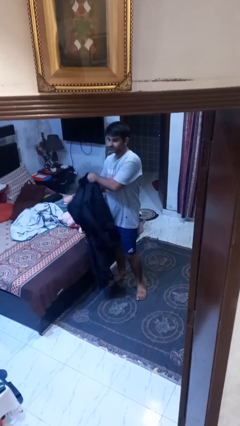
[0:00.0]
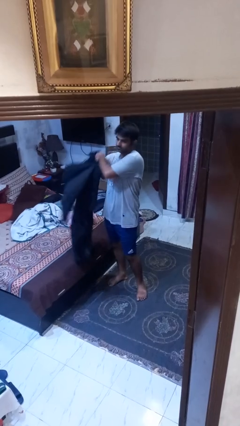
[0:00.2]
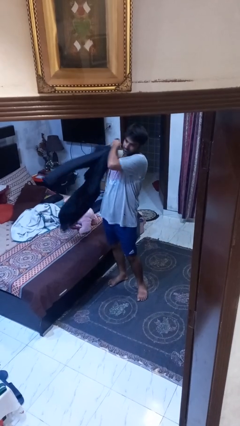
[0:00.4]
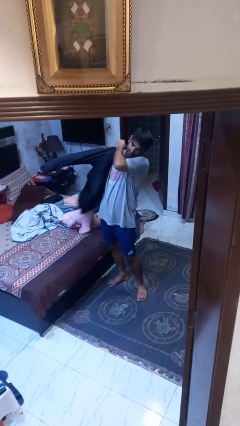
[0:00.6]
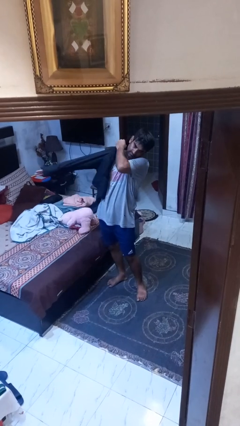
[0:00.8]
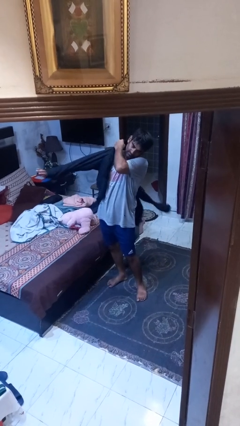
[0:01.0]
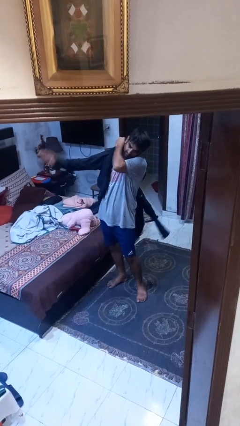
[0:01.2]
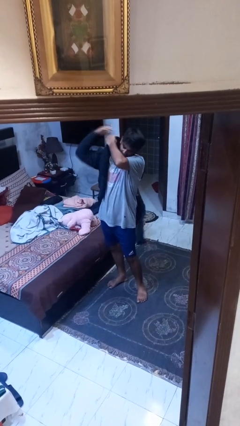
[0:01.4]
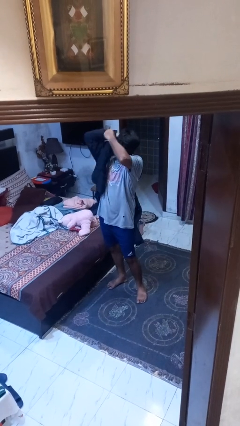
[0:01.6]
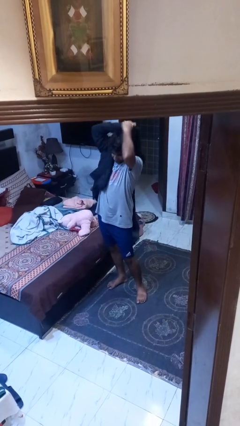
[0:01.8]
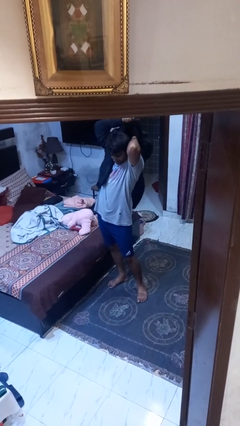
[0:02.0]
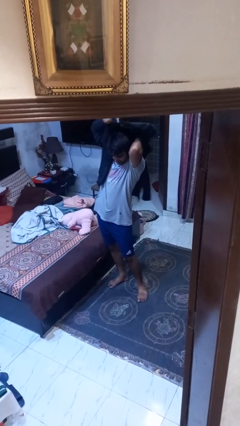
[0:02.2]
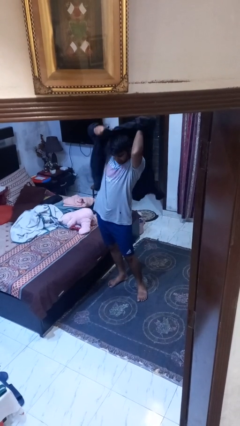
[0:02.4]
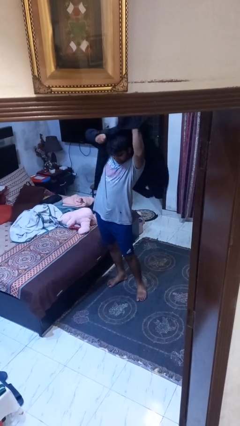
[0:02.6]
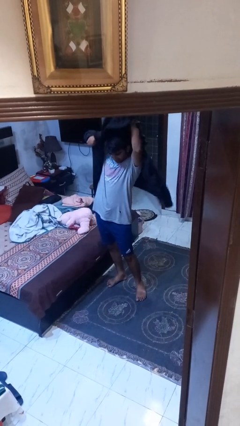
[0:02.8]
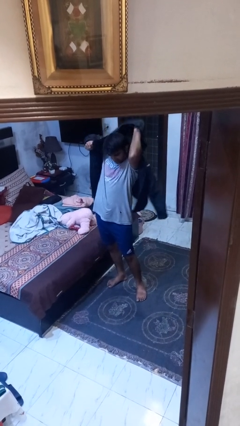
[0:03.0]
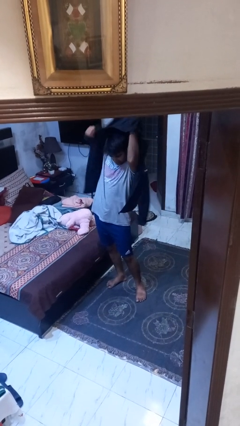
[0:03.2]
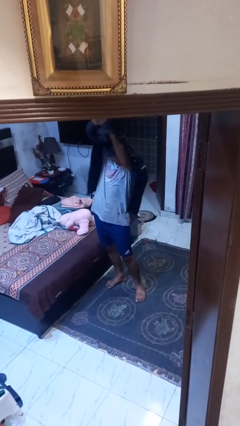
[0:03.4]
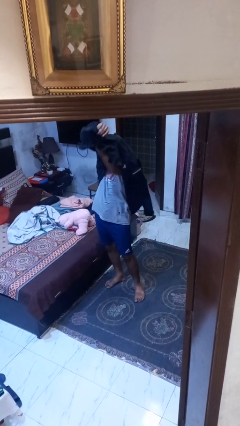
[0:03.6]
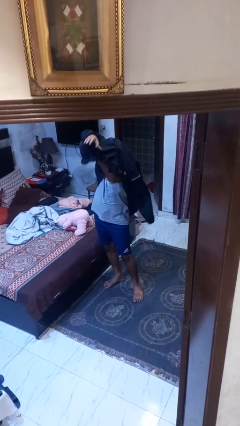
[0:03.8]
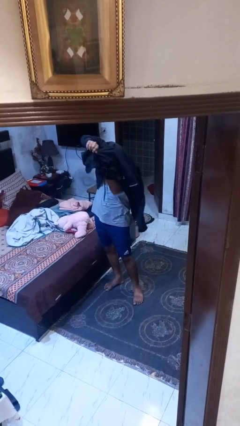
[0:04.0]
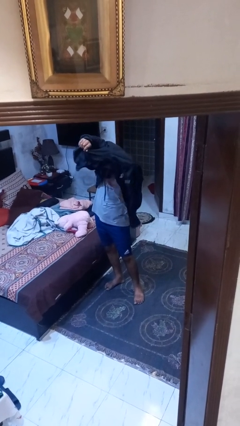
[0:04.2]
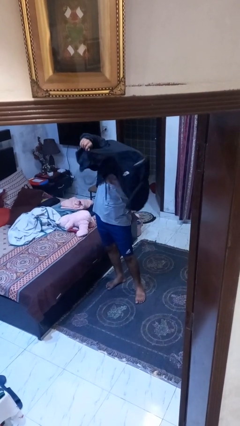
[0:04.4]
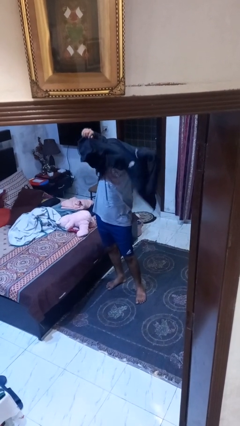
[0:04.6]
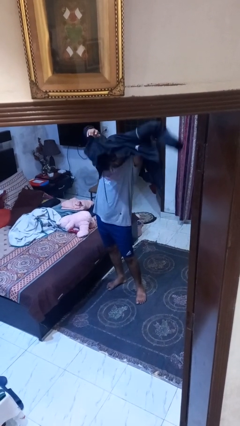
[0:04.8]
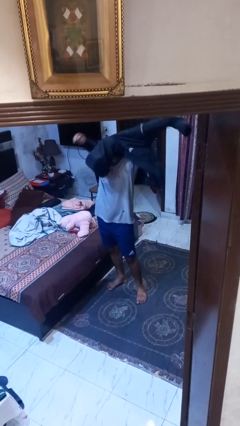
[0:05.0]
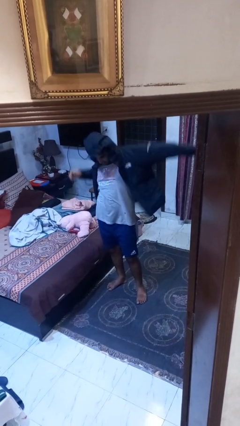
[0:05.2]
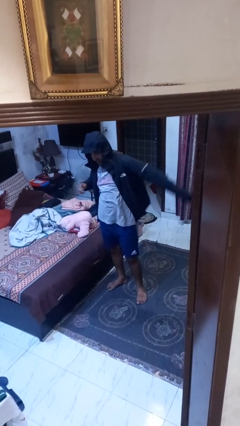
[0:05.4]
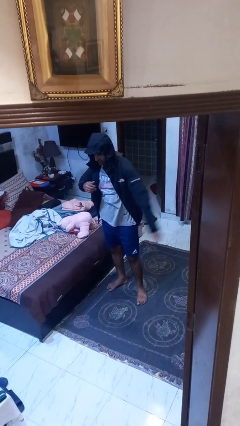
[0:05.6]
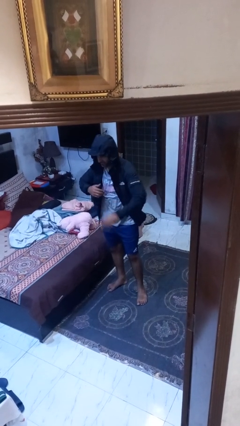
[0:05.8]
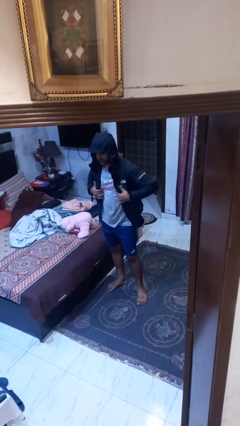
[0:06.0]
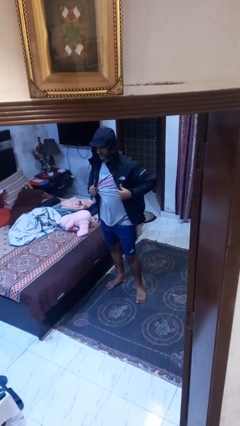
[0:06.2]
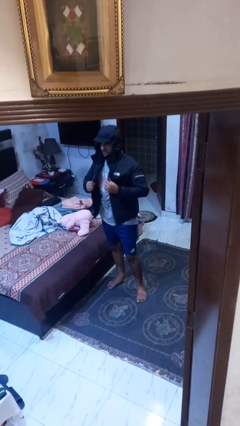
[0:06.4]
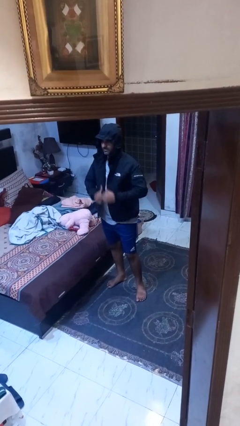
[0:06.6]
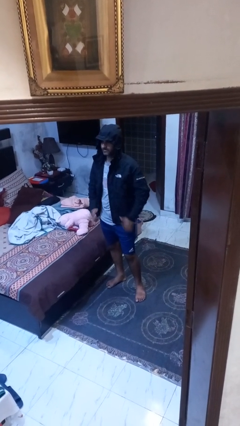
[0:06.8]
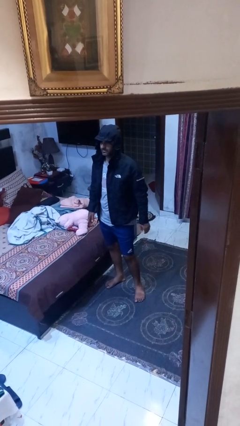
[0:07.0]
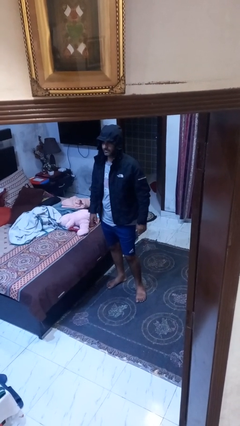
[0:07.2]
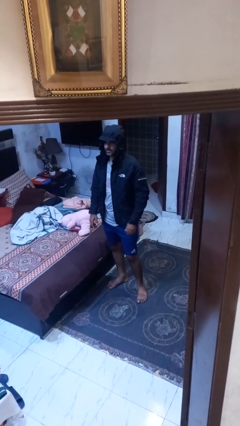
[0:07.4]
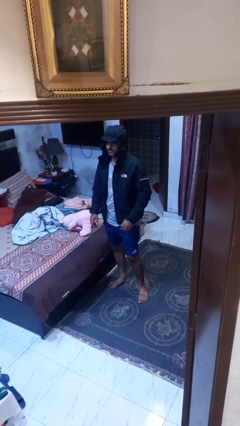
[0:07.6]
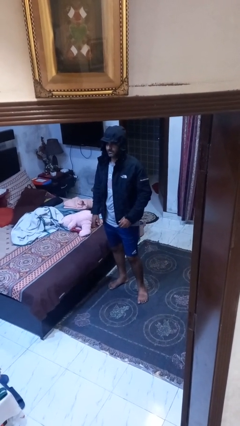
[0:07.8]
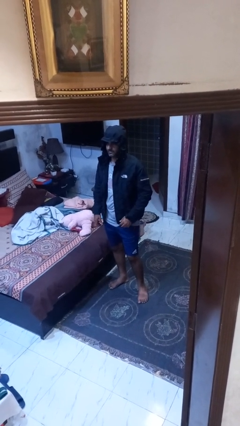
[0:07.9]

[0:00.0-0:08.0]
person puts on hoodie

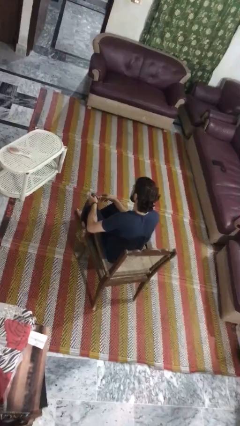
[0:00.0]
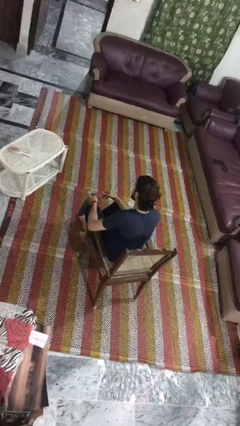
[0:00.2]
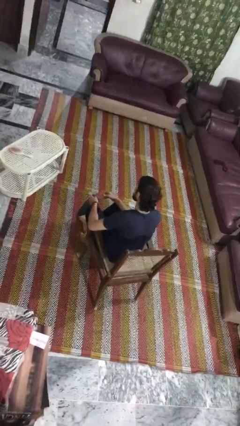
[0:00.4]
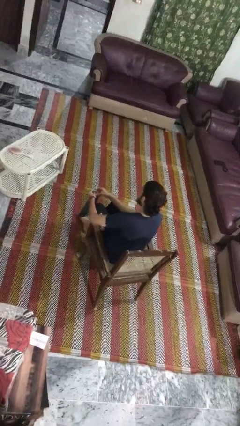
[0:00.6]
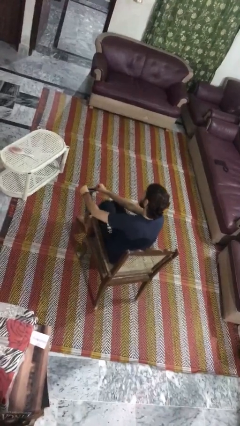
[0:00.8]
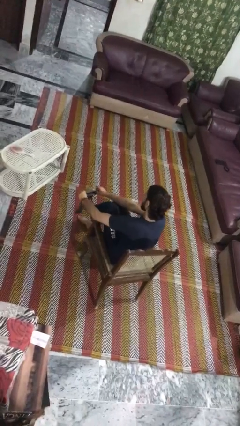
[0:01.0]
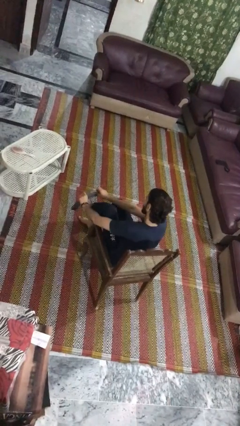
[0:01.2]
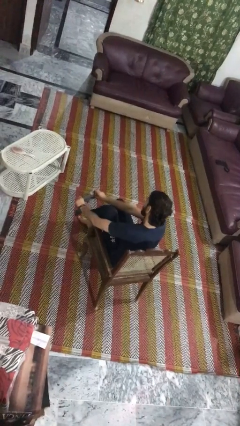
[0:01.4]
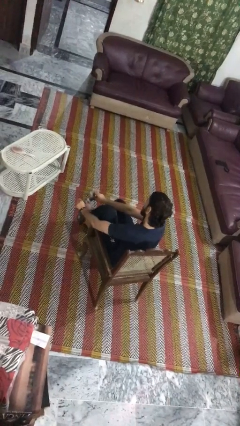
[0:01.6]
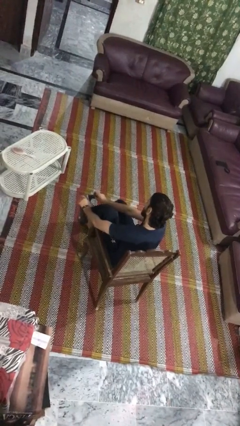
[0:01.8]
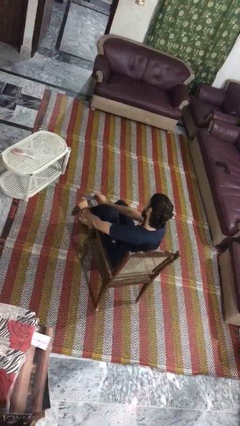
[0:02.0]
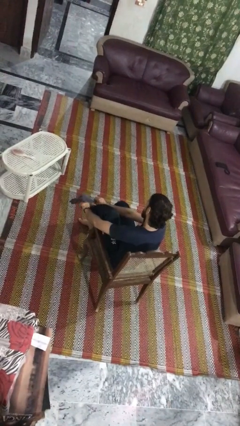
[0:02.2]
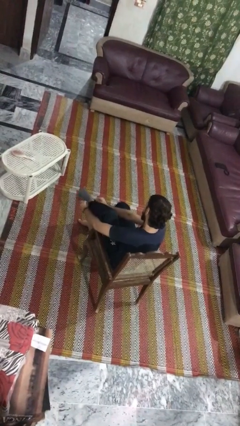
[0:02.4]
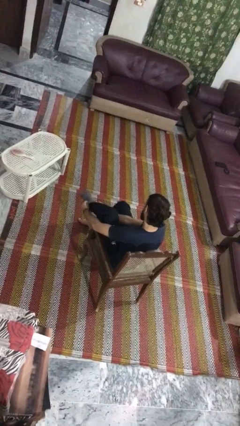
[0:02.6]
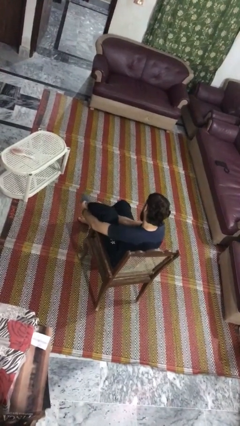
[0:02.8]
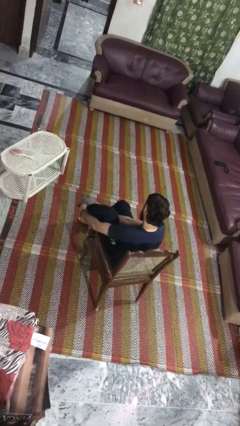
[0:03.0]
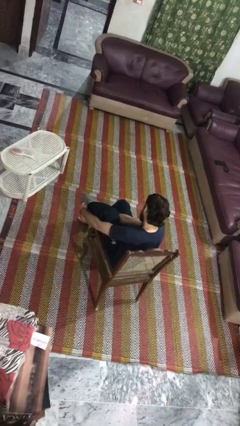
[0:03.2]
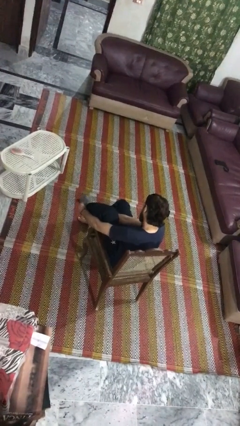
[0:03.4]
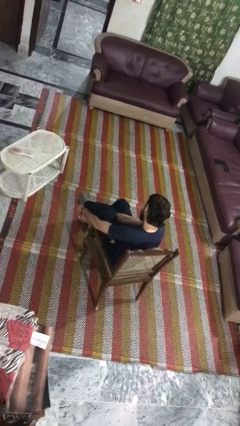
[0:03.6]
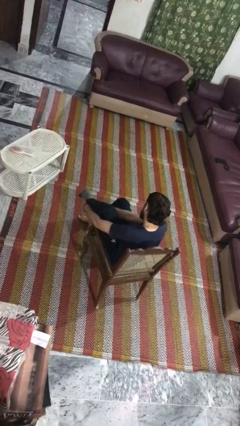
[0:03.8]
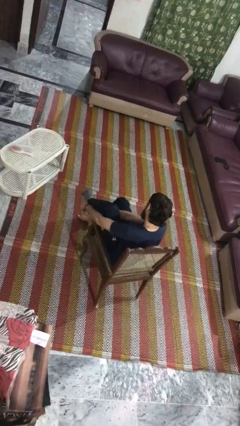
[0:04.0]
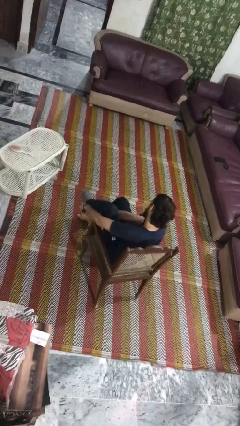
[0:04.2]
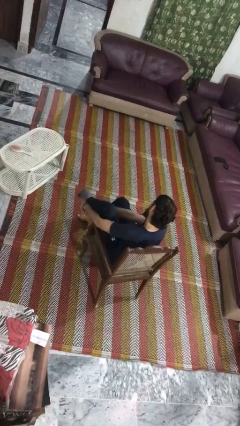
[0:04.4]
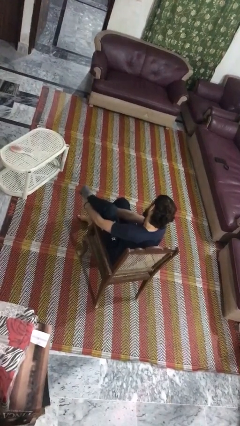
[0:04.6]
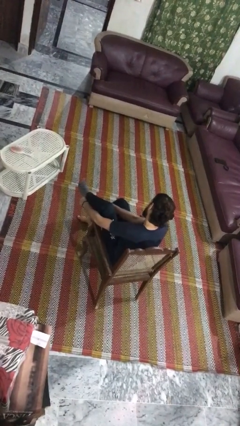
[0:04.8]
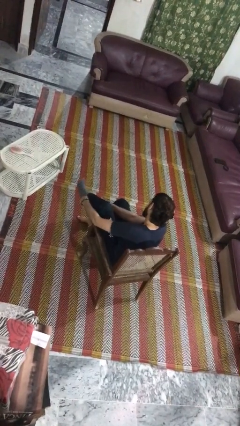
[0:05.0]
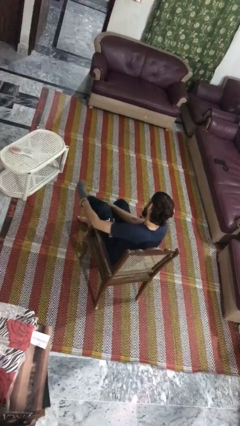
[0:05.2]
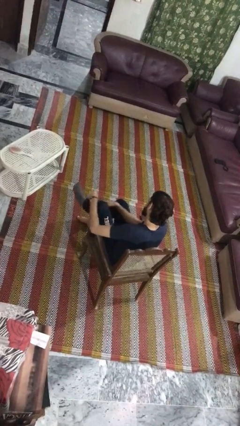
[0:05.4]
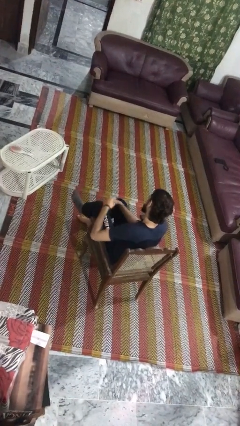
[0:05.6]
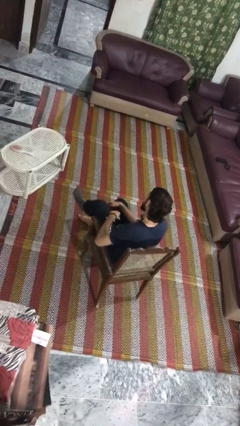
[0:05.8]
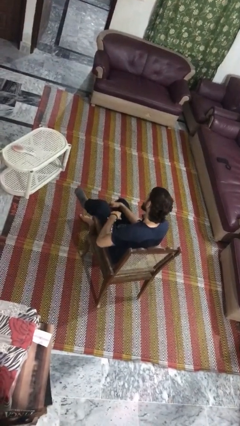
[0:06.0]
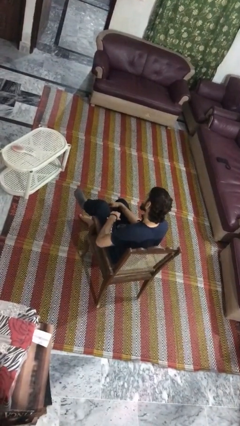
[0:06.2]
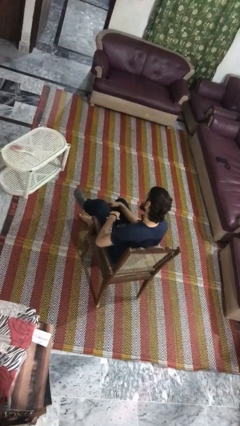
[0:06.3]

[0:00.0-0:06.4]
person puts on socks

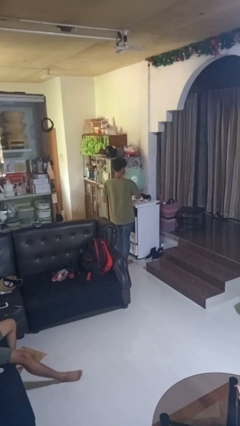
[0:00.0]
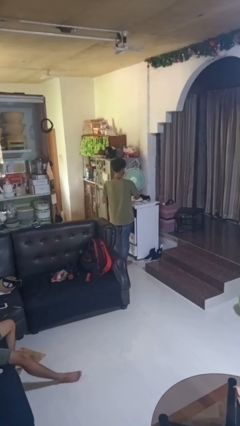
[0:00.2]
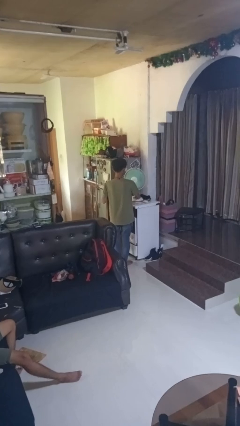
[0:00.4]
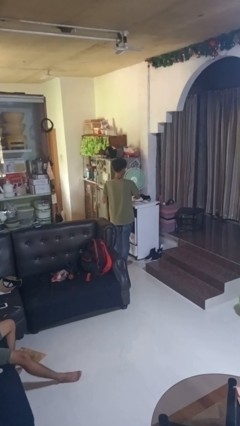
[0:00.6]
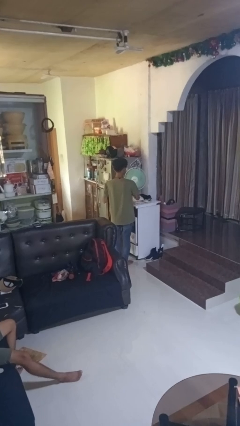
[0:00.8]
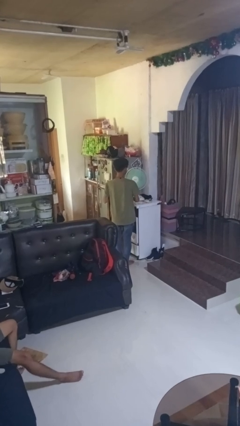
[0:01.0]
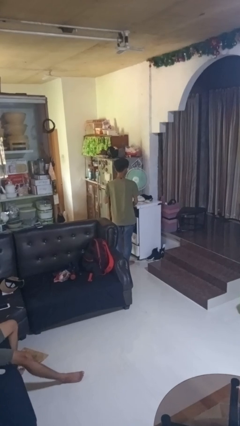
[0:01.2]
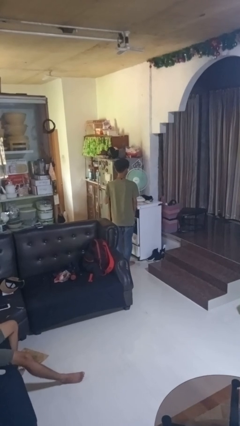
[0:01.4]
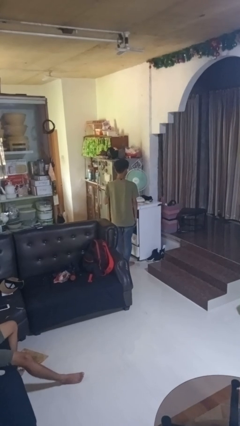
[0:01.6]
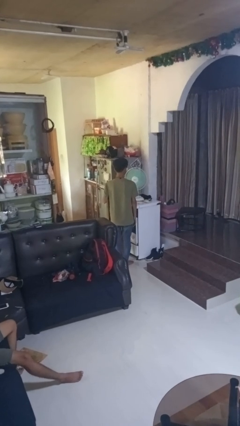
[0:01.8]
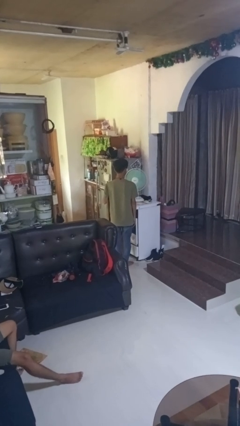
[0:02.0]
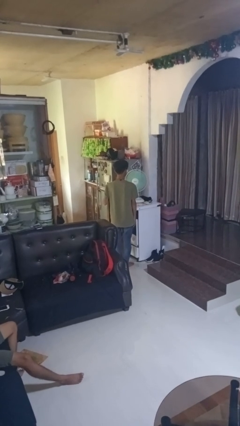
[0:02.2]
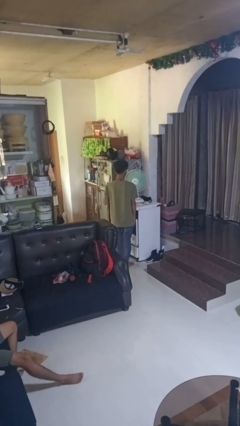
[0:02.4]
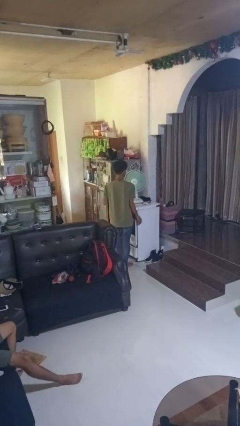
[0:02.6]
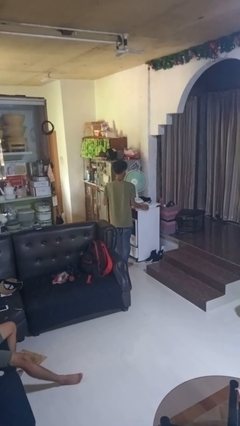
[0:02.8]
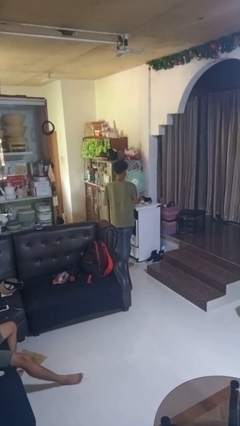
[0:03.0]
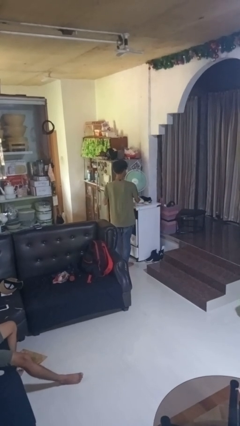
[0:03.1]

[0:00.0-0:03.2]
person turns on fan

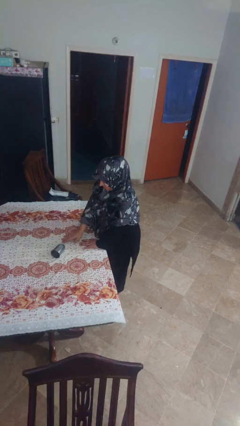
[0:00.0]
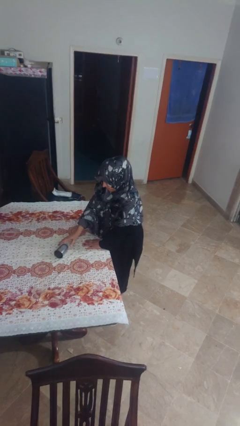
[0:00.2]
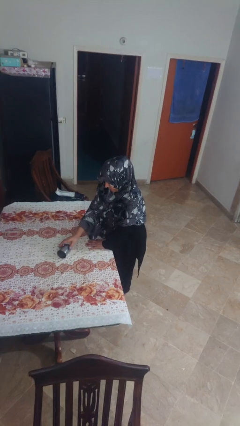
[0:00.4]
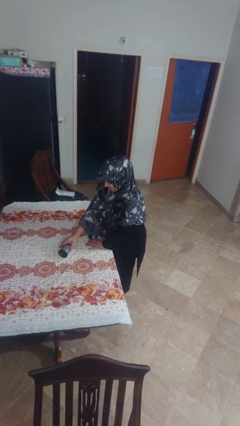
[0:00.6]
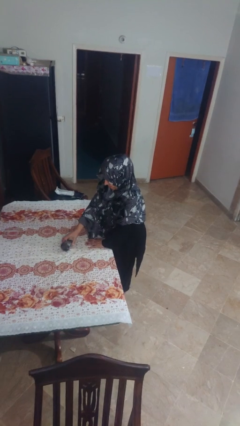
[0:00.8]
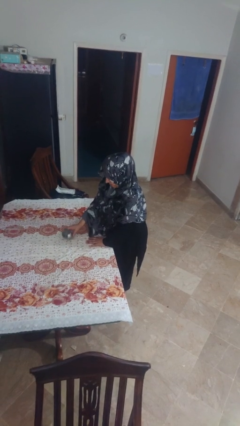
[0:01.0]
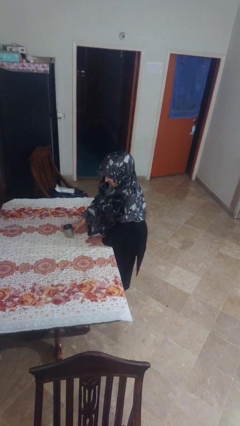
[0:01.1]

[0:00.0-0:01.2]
person sets upright glass
